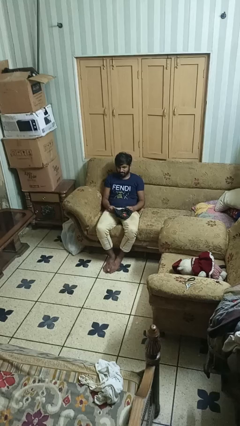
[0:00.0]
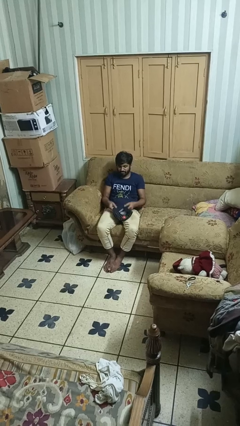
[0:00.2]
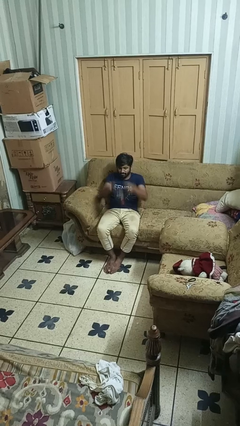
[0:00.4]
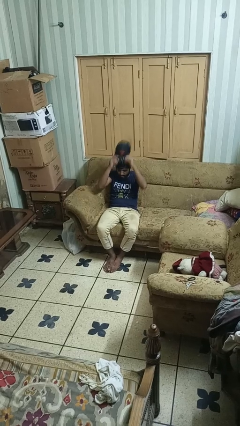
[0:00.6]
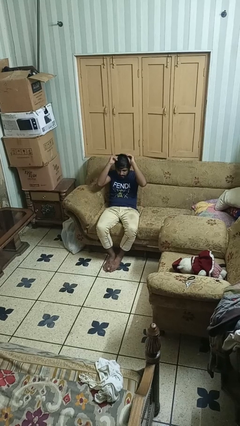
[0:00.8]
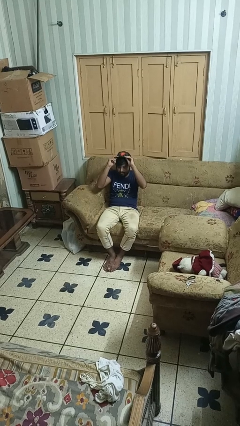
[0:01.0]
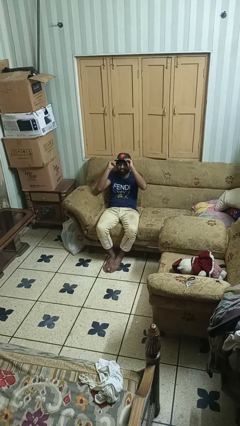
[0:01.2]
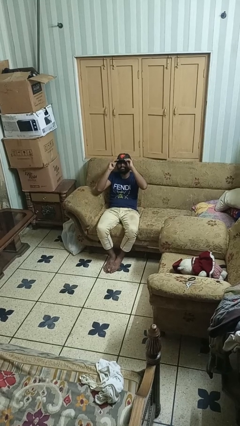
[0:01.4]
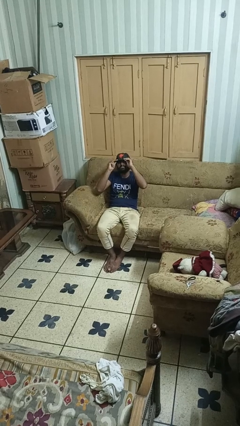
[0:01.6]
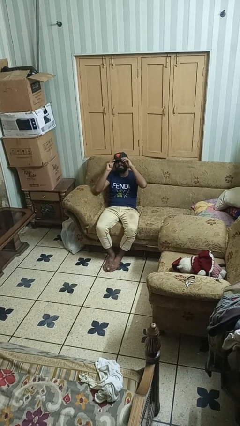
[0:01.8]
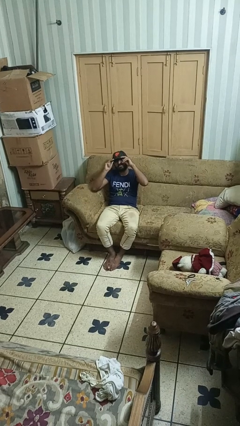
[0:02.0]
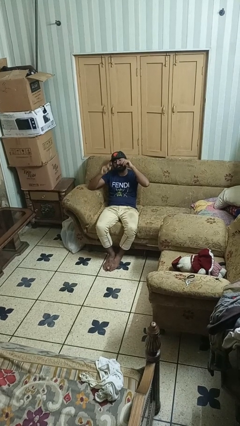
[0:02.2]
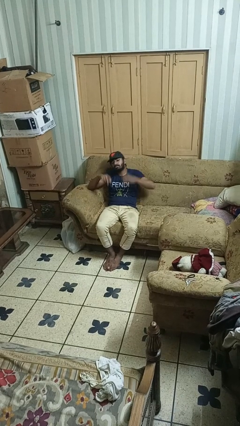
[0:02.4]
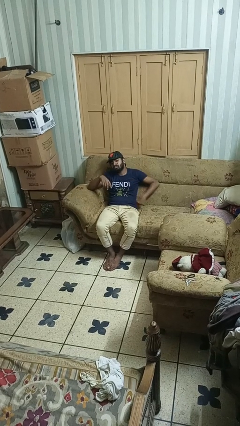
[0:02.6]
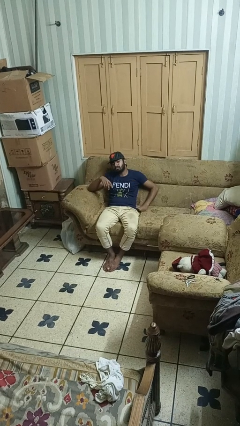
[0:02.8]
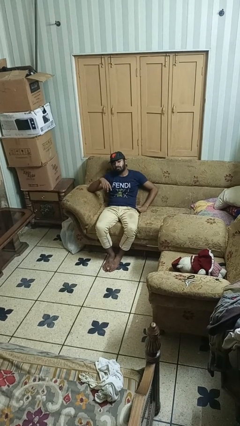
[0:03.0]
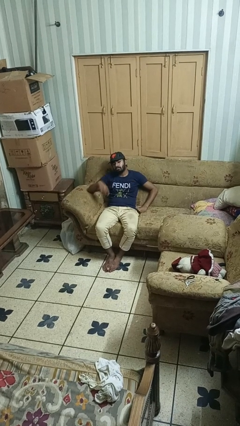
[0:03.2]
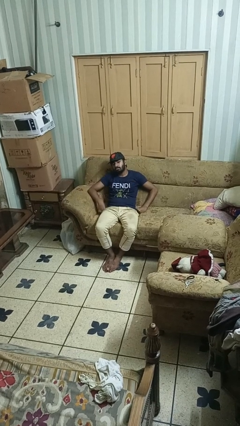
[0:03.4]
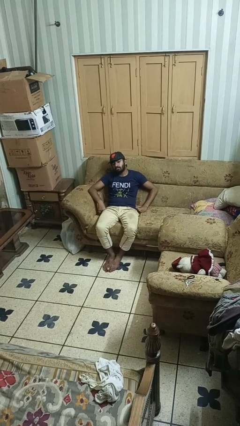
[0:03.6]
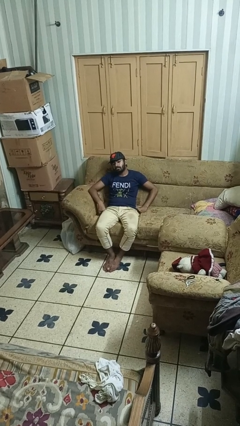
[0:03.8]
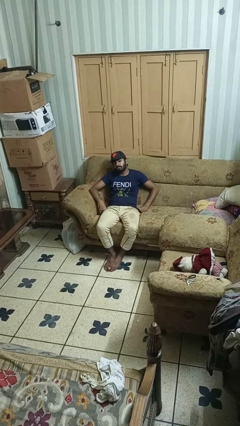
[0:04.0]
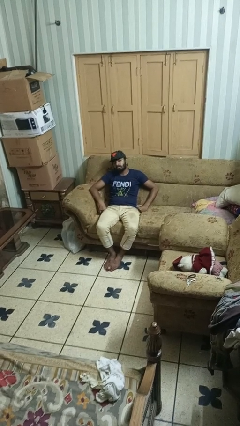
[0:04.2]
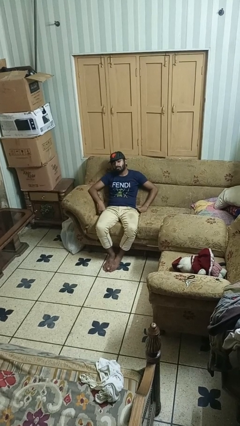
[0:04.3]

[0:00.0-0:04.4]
person puts on hat

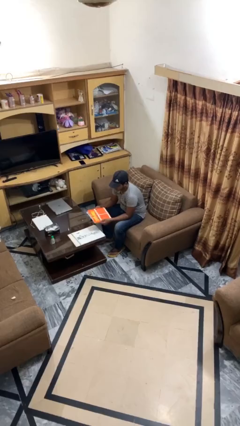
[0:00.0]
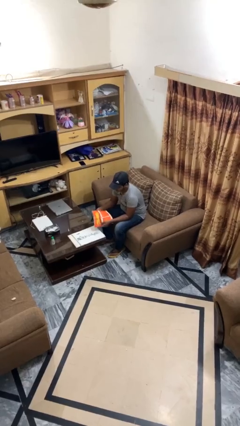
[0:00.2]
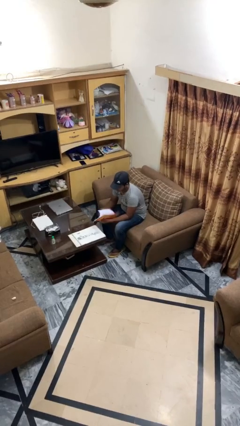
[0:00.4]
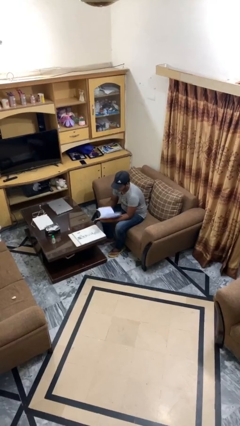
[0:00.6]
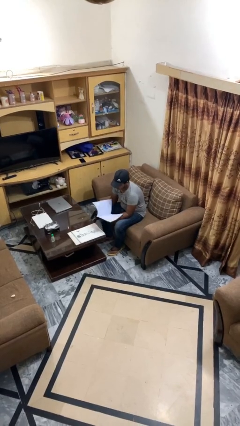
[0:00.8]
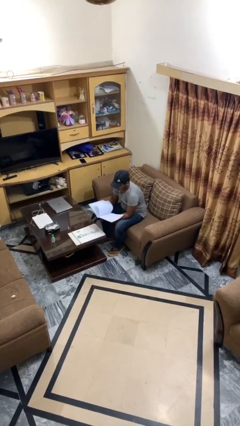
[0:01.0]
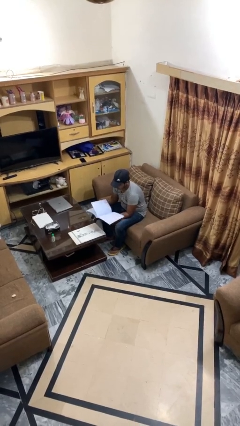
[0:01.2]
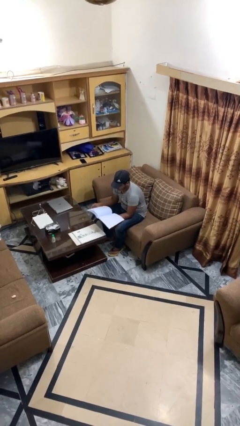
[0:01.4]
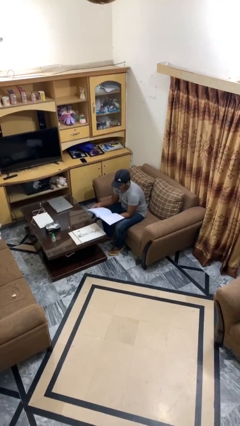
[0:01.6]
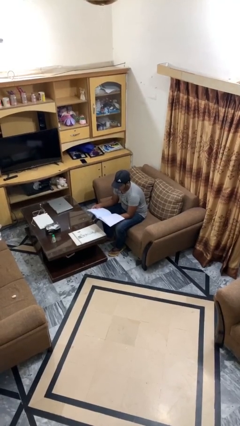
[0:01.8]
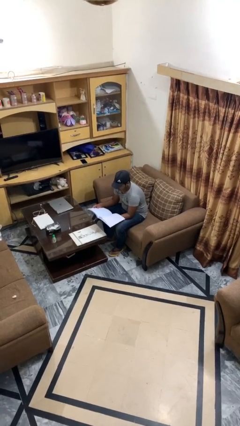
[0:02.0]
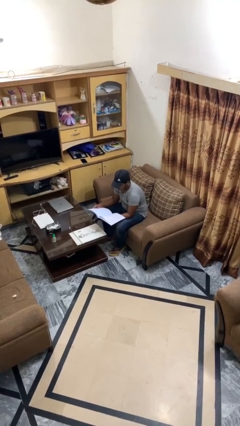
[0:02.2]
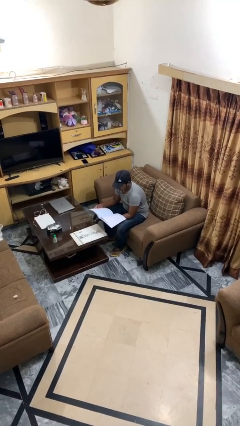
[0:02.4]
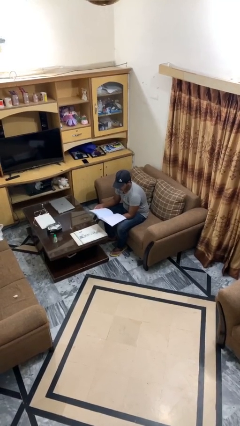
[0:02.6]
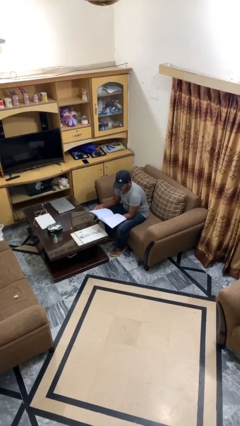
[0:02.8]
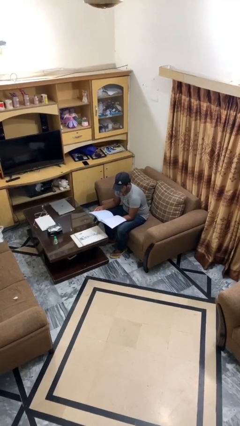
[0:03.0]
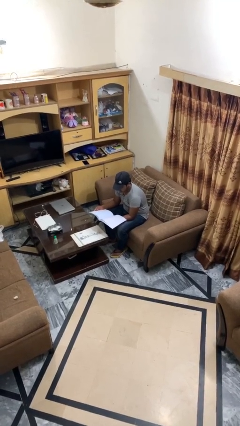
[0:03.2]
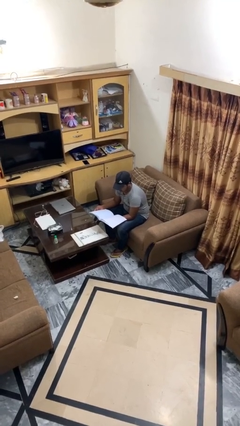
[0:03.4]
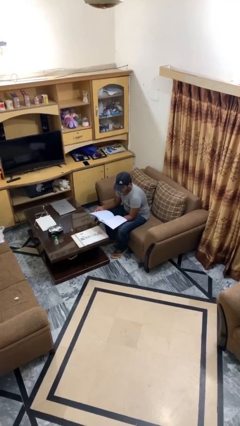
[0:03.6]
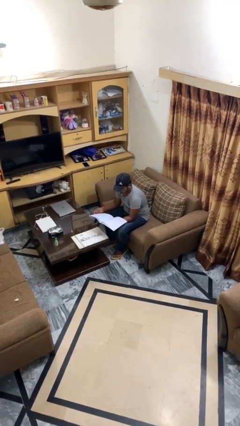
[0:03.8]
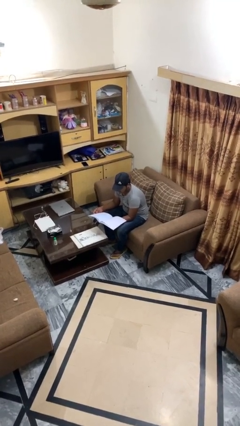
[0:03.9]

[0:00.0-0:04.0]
person reads document

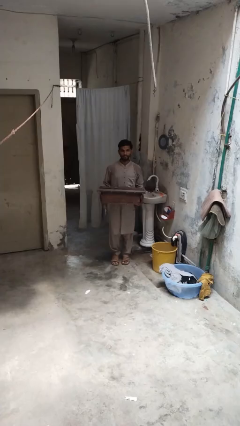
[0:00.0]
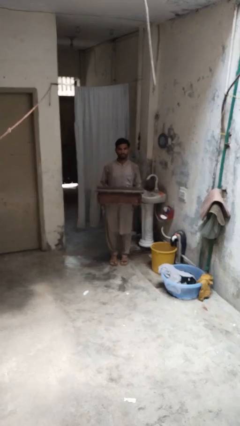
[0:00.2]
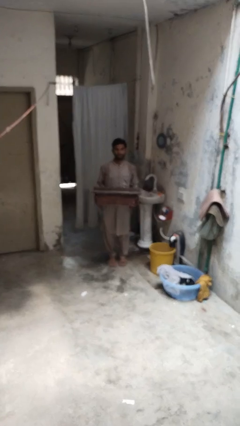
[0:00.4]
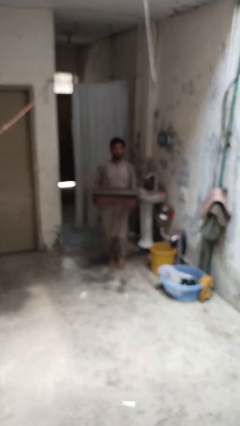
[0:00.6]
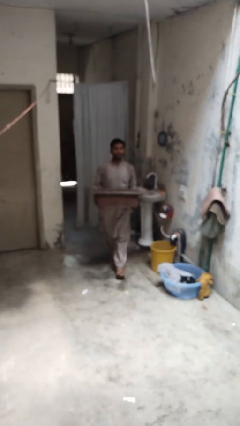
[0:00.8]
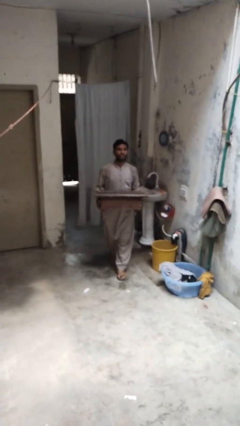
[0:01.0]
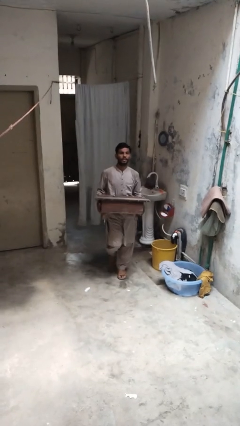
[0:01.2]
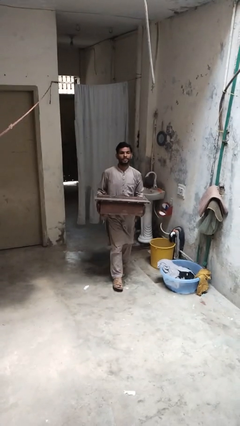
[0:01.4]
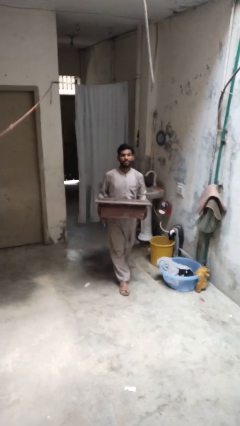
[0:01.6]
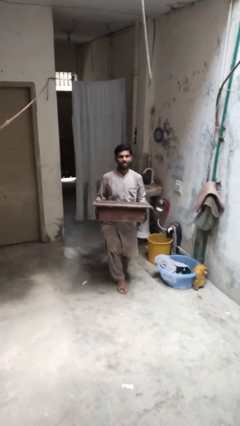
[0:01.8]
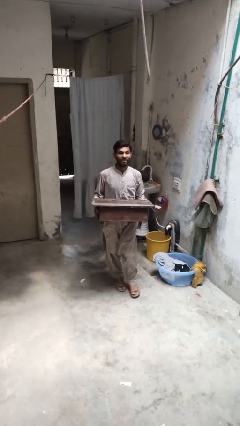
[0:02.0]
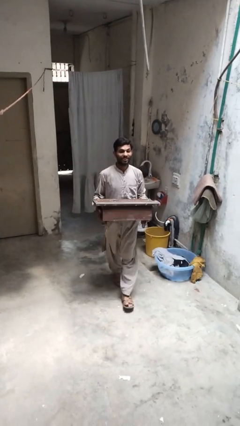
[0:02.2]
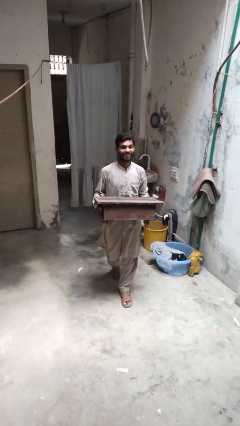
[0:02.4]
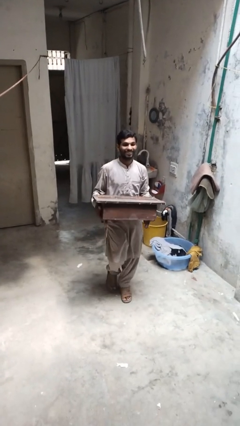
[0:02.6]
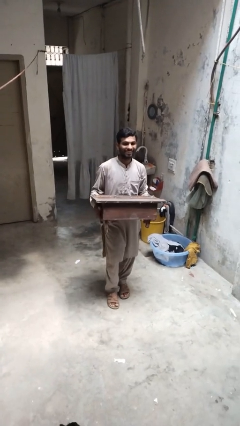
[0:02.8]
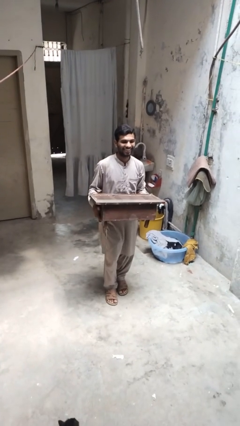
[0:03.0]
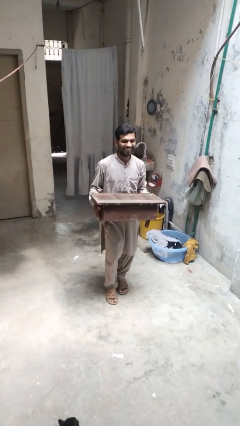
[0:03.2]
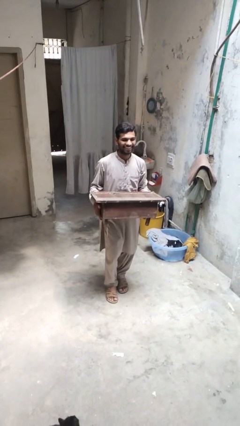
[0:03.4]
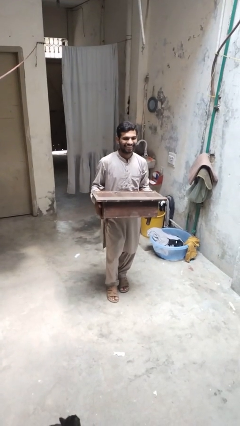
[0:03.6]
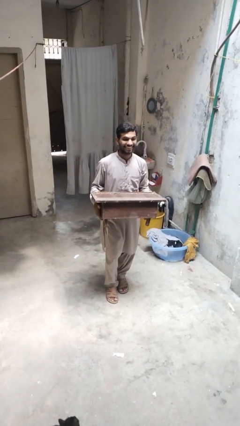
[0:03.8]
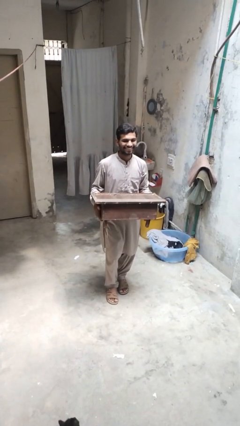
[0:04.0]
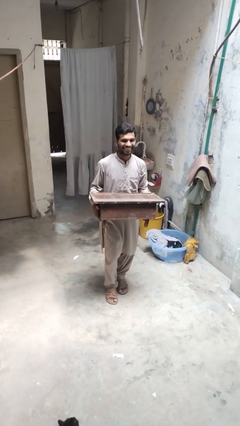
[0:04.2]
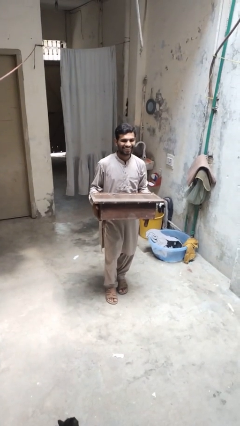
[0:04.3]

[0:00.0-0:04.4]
person carries furniture

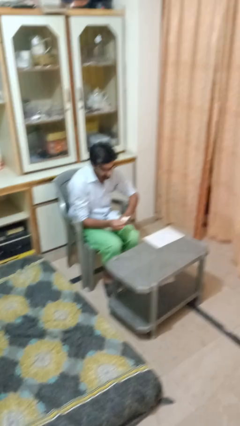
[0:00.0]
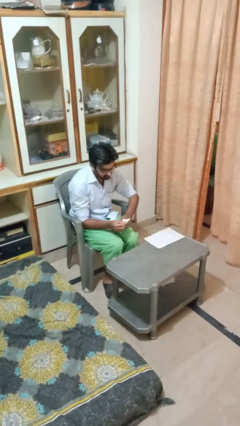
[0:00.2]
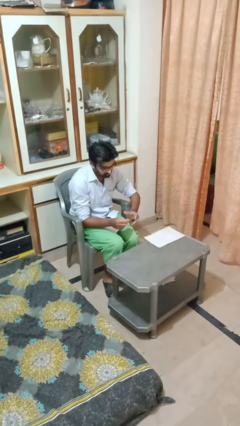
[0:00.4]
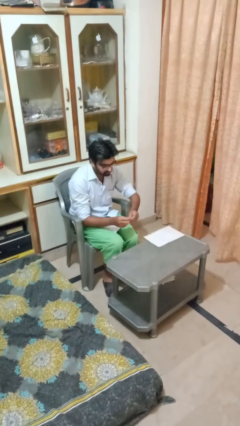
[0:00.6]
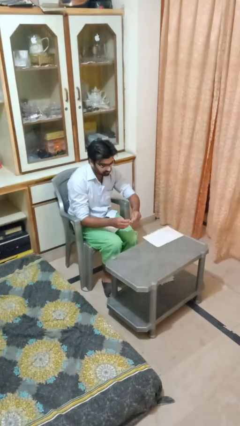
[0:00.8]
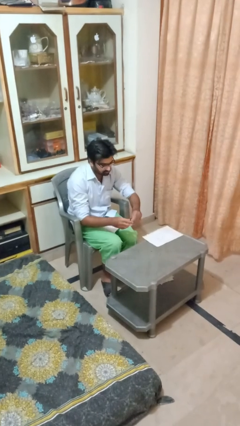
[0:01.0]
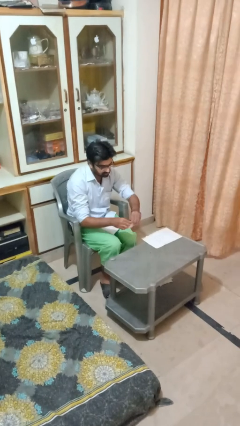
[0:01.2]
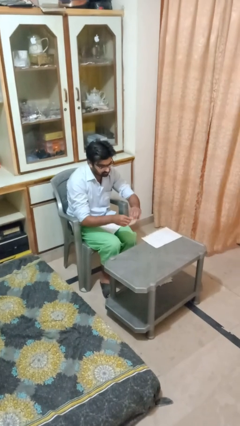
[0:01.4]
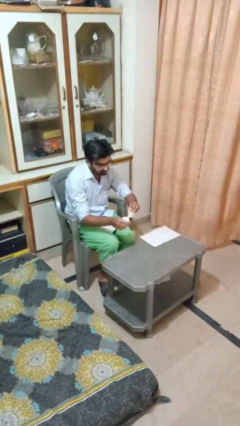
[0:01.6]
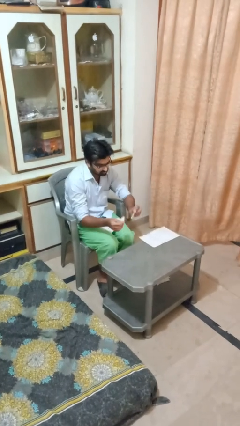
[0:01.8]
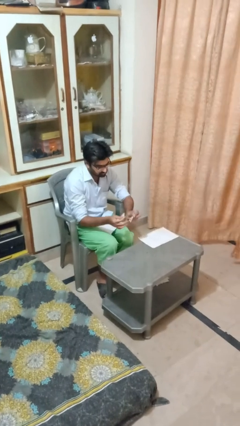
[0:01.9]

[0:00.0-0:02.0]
person tears paper

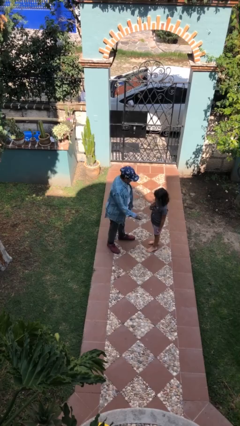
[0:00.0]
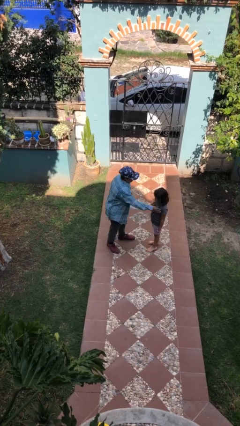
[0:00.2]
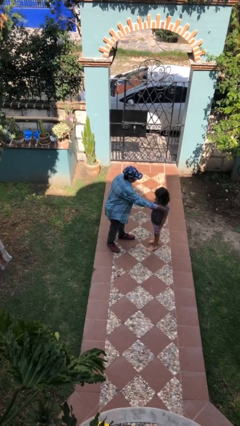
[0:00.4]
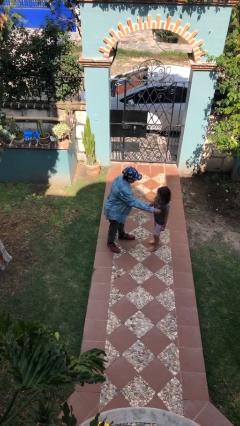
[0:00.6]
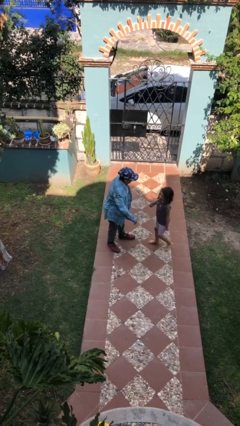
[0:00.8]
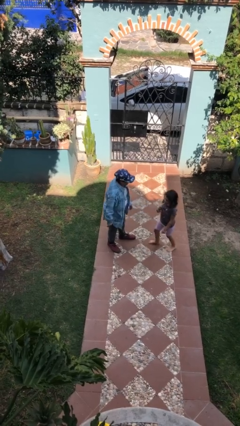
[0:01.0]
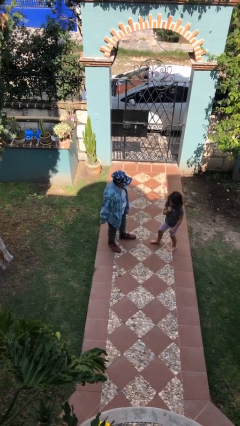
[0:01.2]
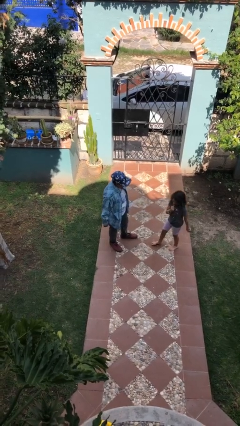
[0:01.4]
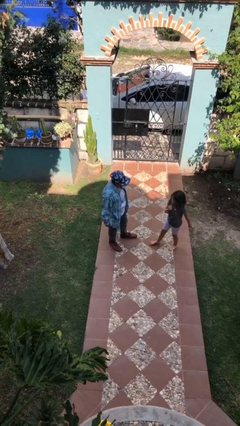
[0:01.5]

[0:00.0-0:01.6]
person shoves person

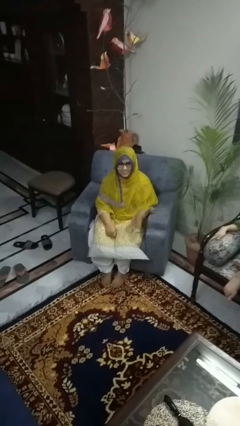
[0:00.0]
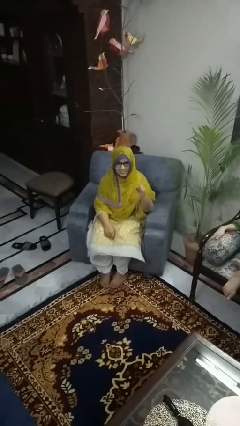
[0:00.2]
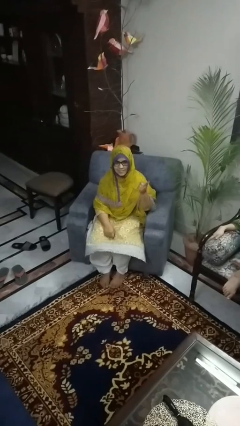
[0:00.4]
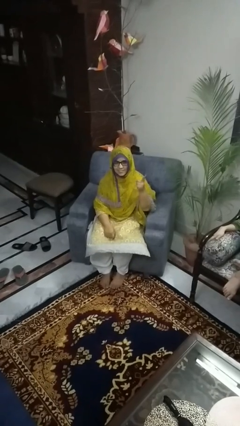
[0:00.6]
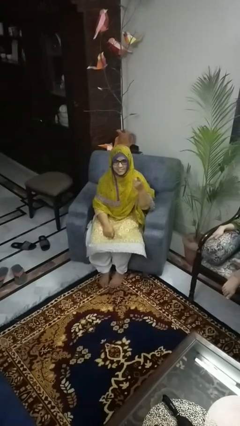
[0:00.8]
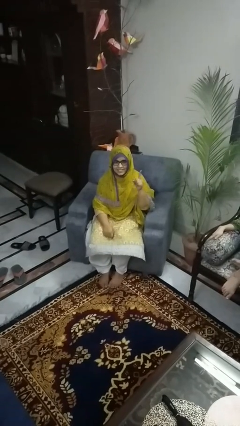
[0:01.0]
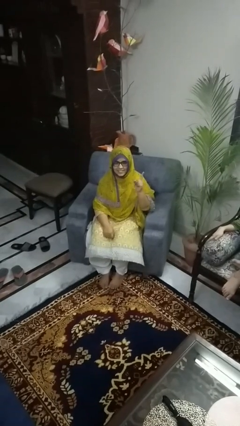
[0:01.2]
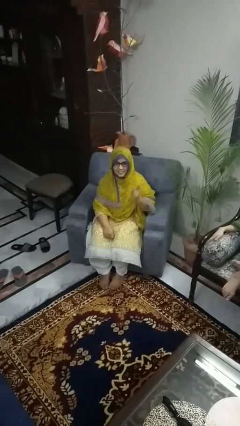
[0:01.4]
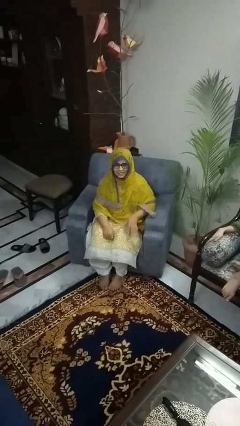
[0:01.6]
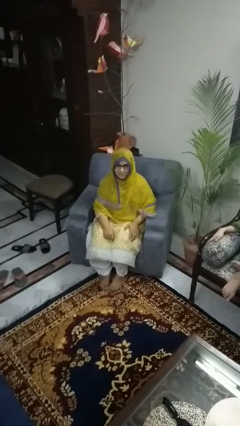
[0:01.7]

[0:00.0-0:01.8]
person gestures number one
